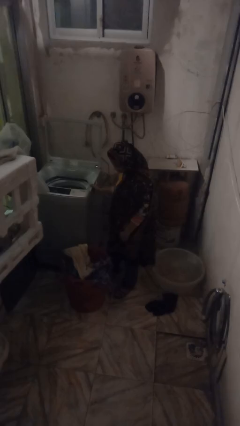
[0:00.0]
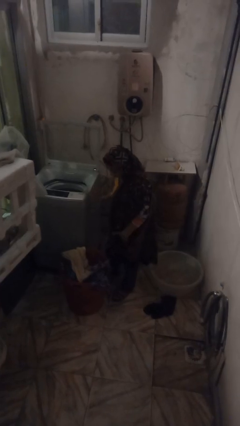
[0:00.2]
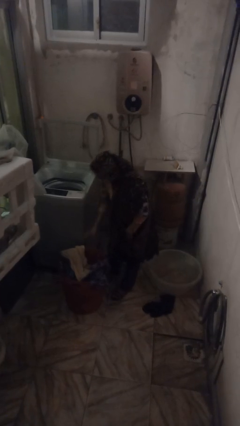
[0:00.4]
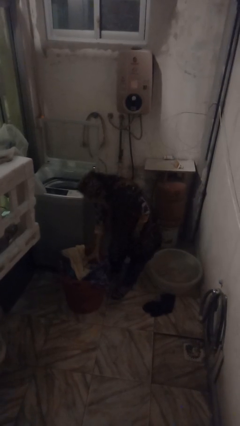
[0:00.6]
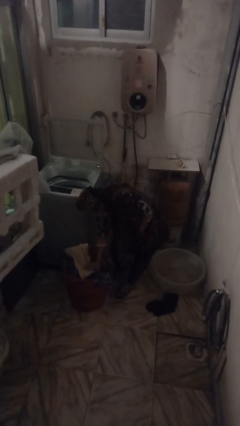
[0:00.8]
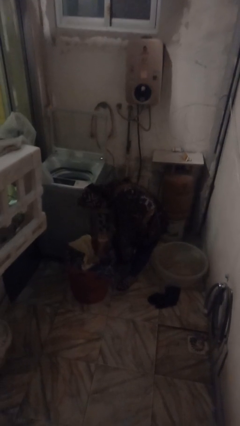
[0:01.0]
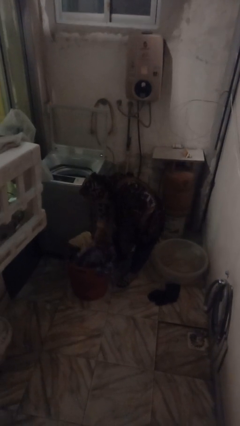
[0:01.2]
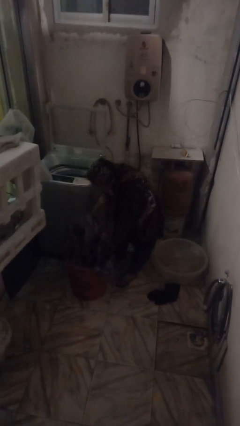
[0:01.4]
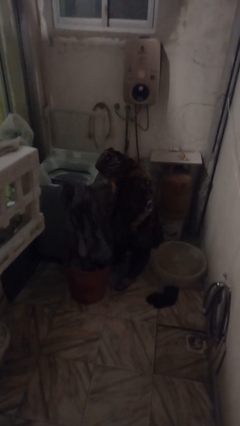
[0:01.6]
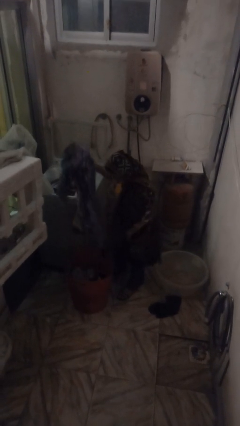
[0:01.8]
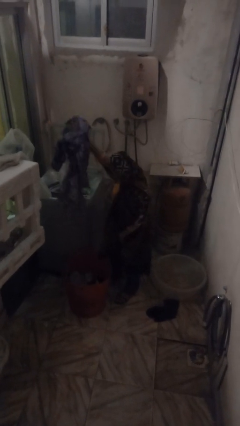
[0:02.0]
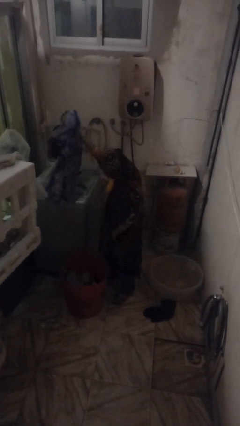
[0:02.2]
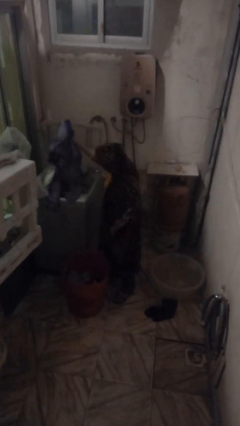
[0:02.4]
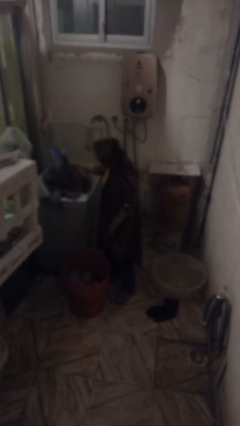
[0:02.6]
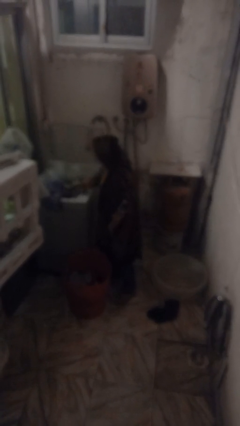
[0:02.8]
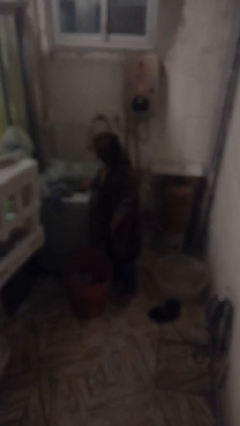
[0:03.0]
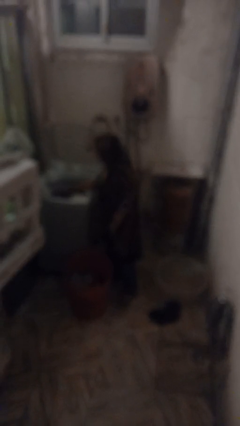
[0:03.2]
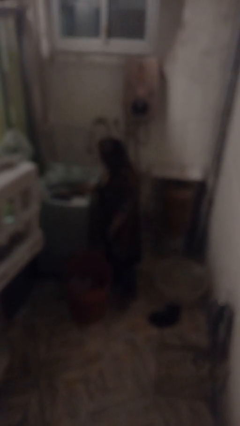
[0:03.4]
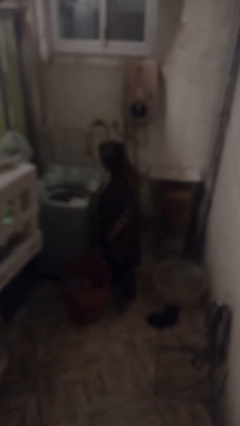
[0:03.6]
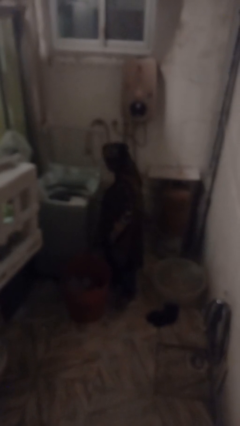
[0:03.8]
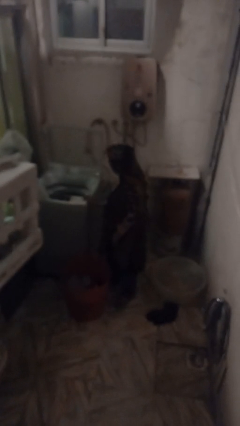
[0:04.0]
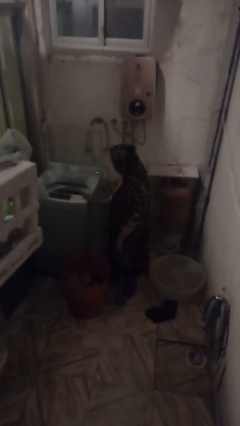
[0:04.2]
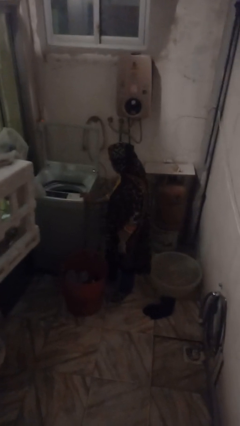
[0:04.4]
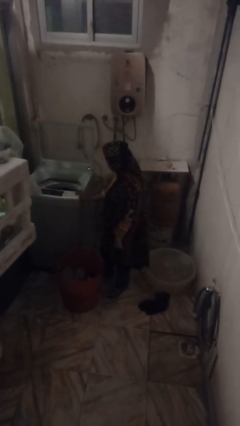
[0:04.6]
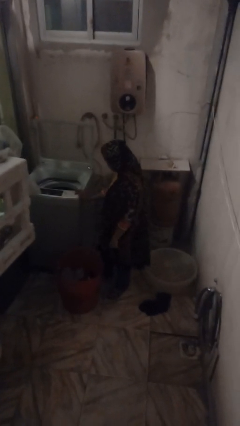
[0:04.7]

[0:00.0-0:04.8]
person loads clotheswasher

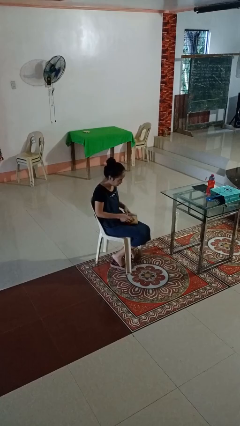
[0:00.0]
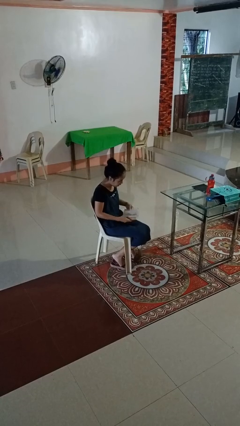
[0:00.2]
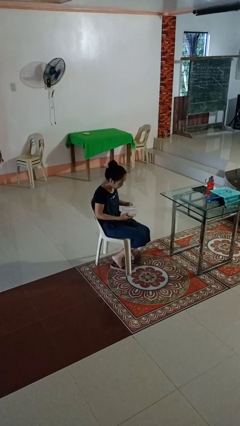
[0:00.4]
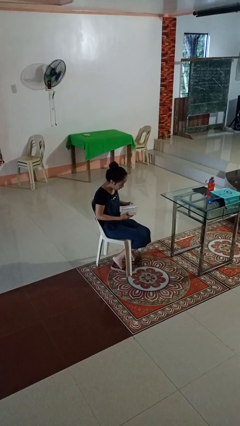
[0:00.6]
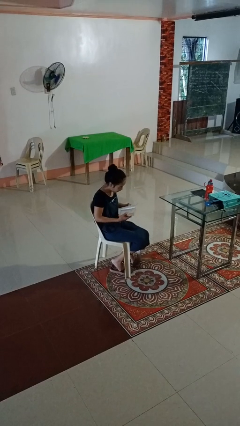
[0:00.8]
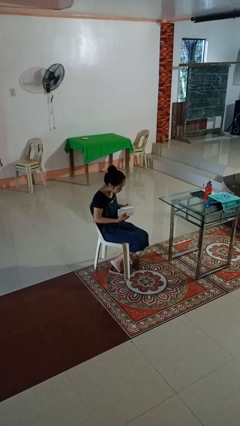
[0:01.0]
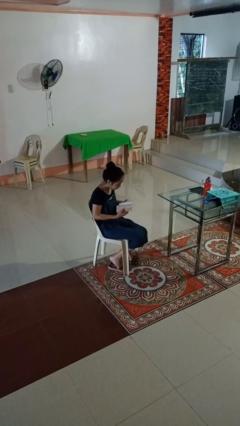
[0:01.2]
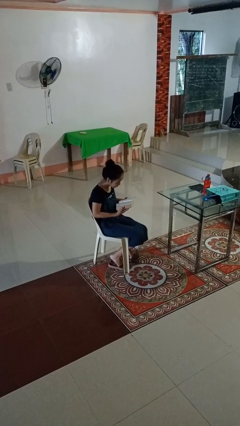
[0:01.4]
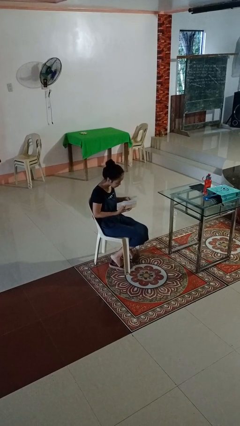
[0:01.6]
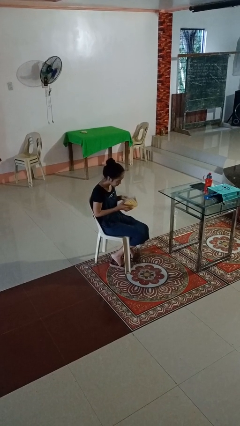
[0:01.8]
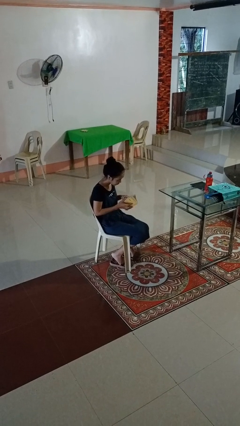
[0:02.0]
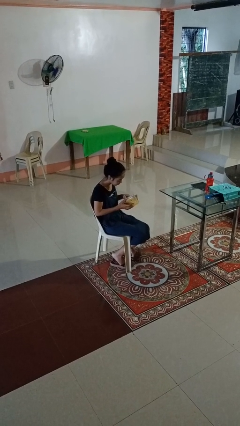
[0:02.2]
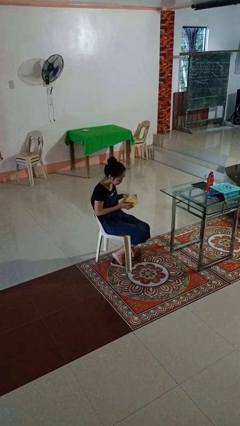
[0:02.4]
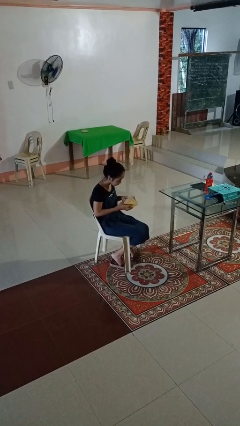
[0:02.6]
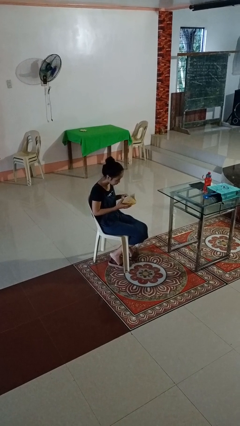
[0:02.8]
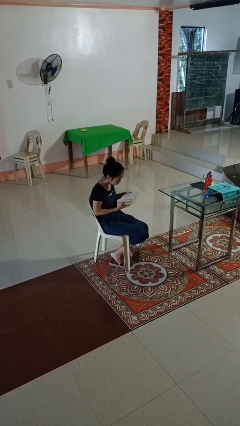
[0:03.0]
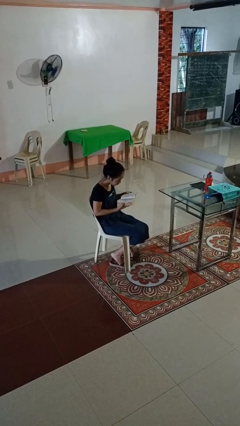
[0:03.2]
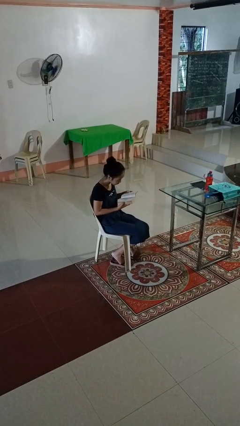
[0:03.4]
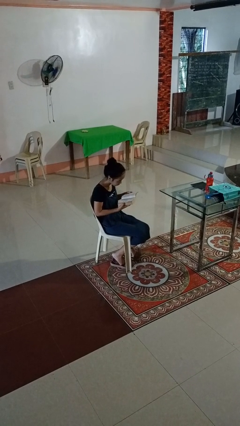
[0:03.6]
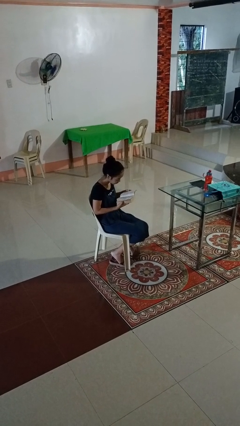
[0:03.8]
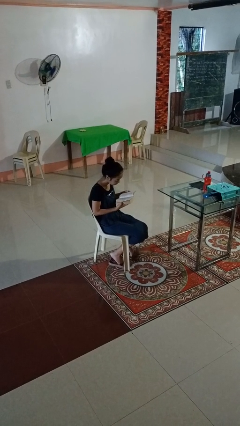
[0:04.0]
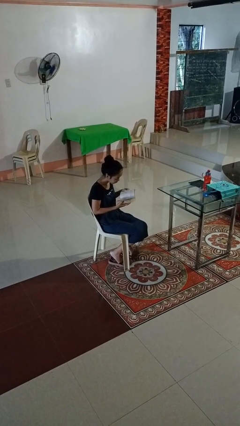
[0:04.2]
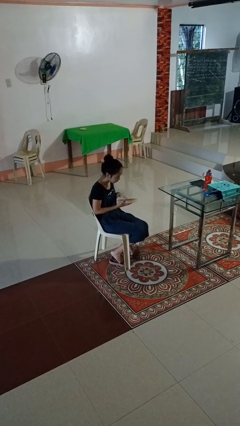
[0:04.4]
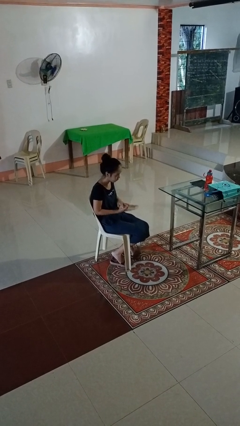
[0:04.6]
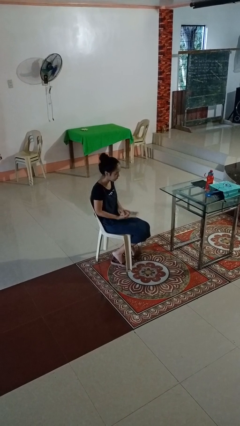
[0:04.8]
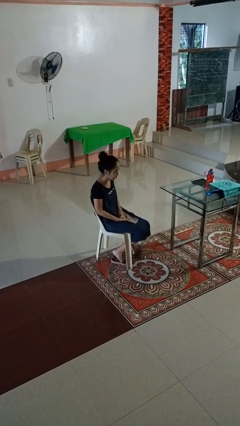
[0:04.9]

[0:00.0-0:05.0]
person reads book

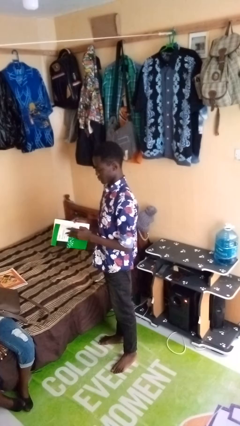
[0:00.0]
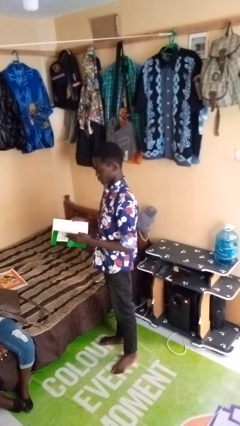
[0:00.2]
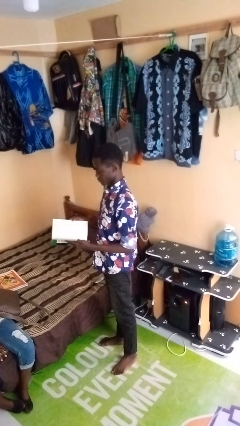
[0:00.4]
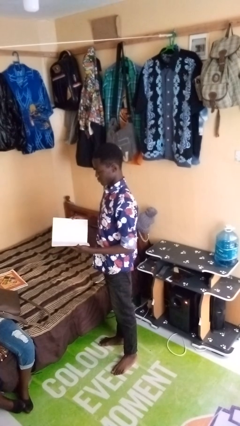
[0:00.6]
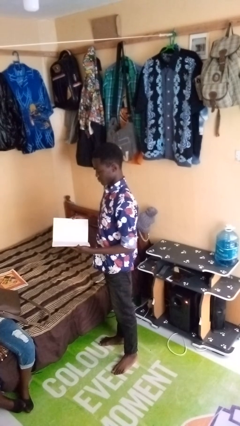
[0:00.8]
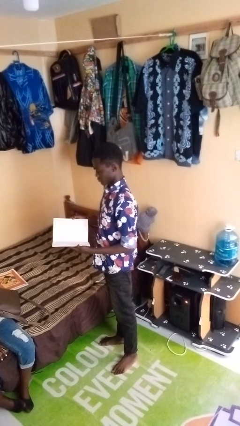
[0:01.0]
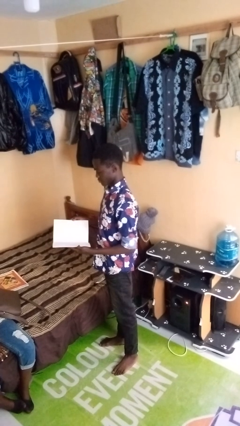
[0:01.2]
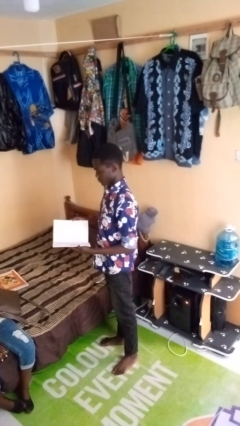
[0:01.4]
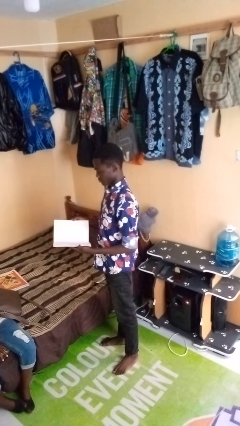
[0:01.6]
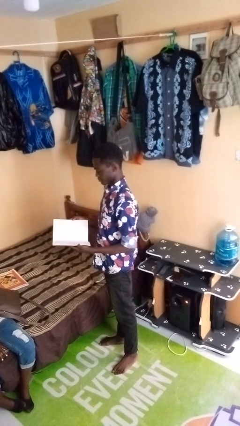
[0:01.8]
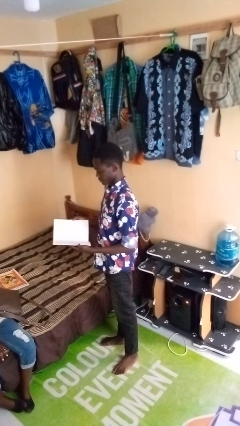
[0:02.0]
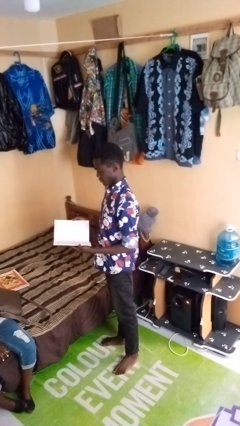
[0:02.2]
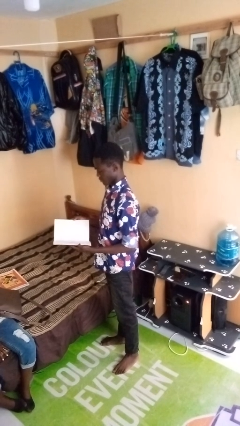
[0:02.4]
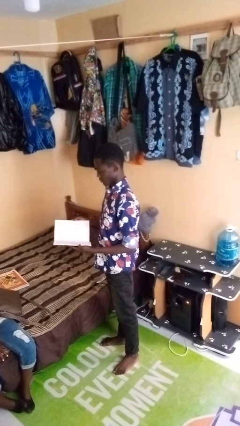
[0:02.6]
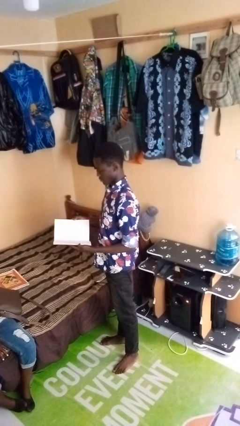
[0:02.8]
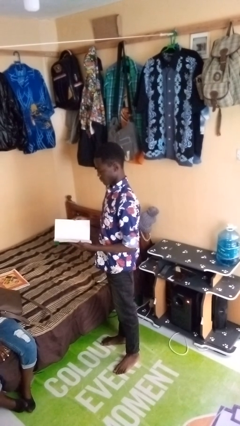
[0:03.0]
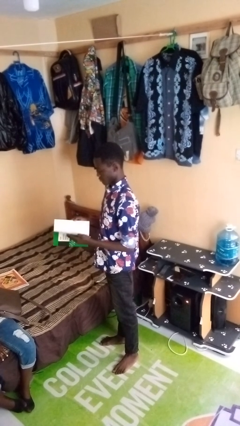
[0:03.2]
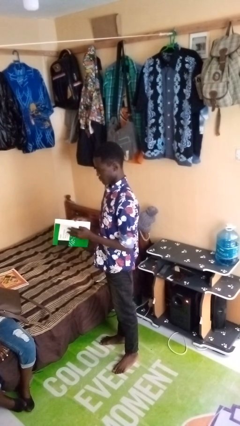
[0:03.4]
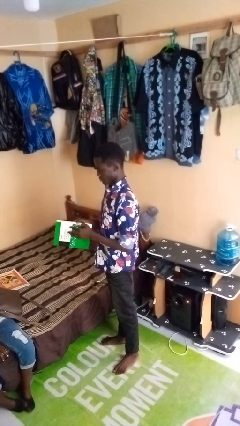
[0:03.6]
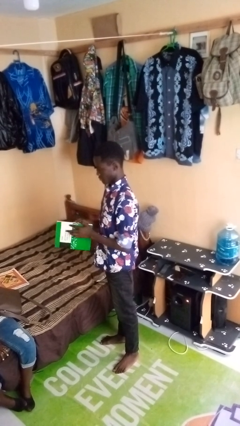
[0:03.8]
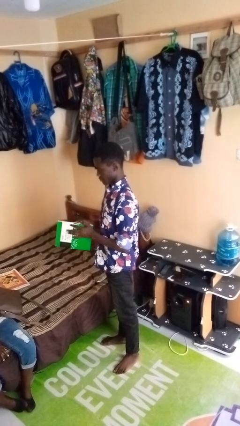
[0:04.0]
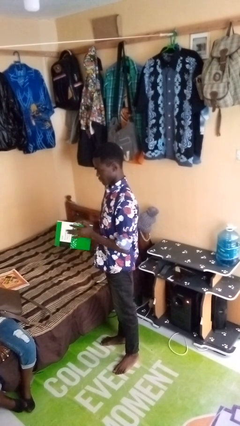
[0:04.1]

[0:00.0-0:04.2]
person reads magazine

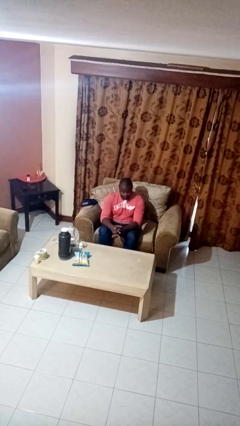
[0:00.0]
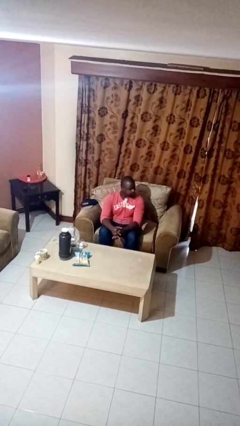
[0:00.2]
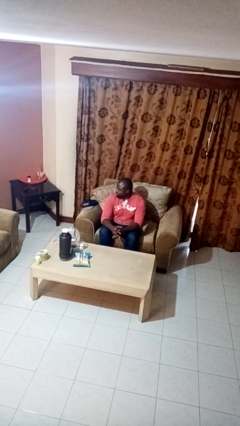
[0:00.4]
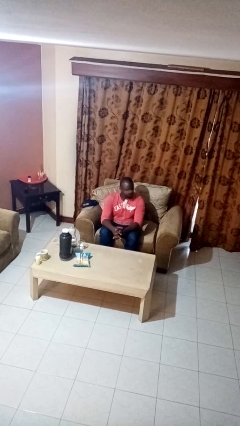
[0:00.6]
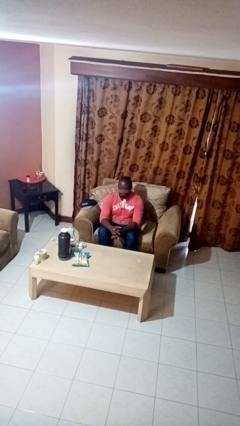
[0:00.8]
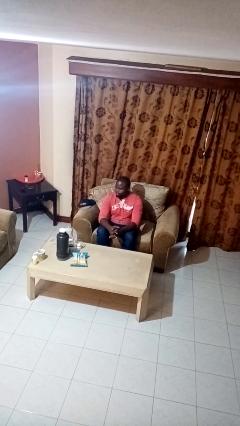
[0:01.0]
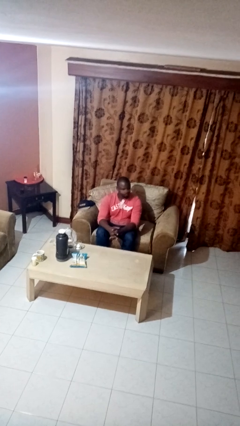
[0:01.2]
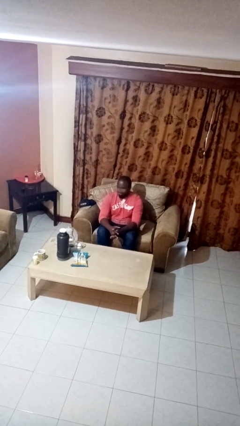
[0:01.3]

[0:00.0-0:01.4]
person shakes head

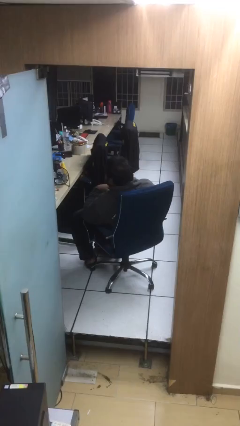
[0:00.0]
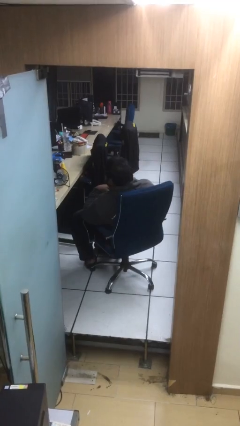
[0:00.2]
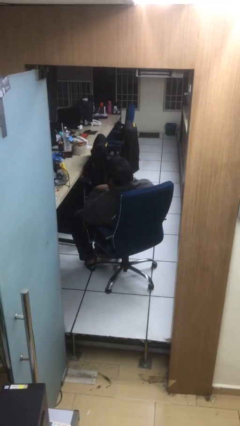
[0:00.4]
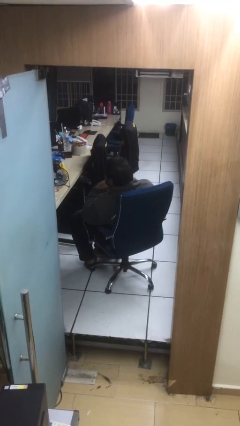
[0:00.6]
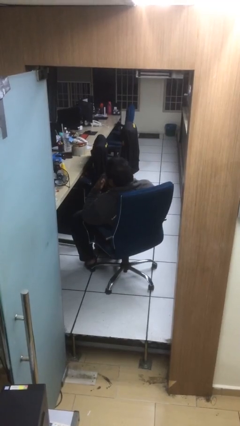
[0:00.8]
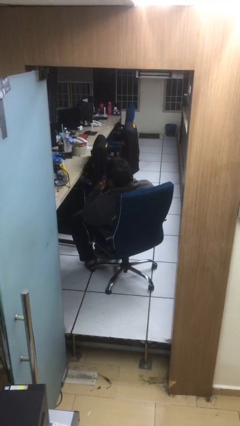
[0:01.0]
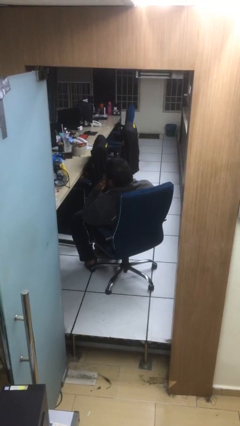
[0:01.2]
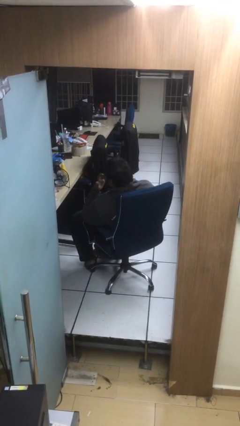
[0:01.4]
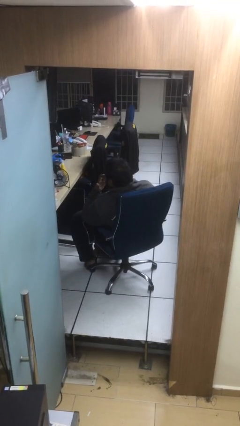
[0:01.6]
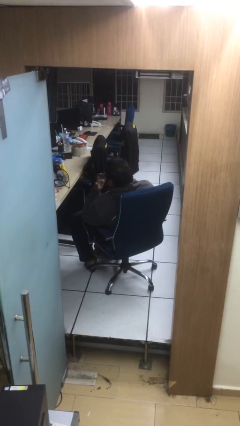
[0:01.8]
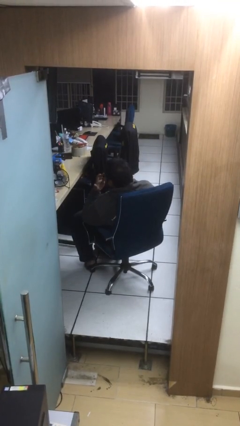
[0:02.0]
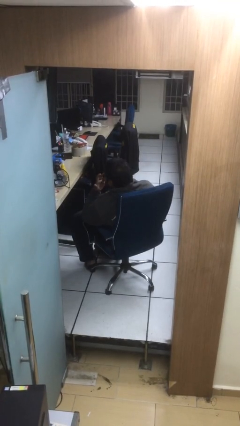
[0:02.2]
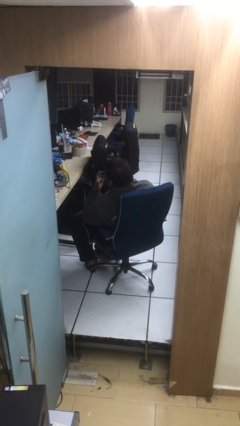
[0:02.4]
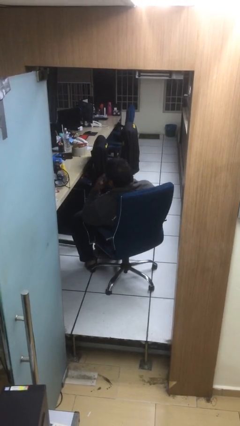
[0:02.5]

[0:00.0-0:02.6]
person licks fingers
